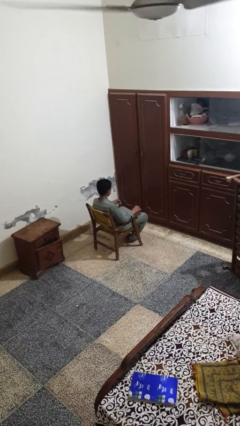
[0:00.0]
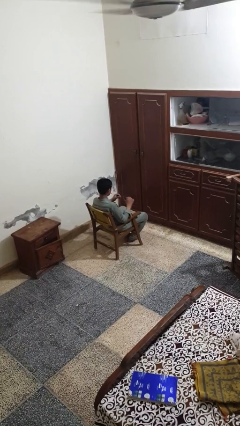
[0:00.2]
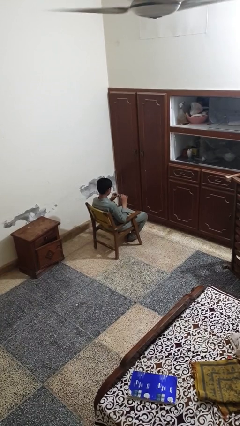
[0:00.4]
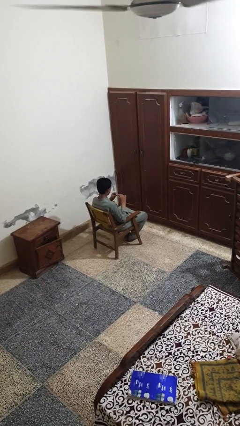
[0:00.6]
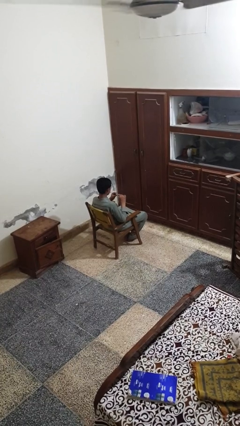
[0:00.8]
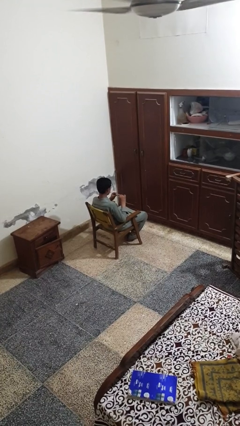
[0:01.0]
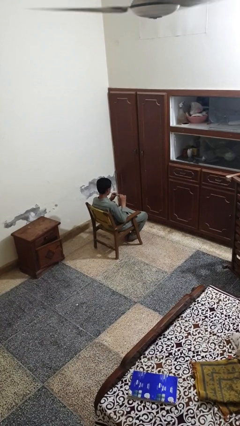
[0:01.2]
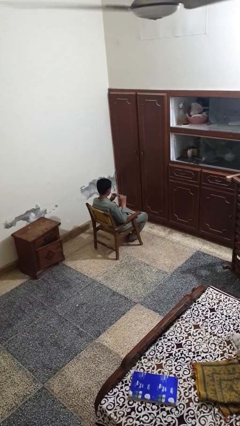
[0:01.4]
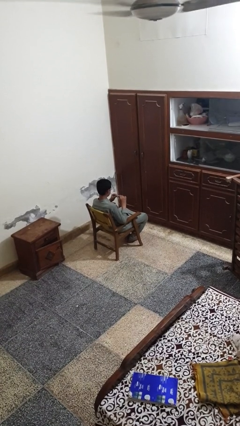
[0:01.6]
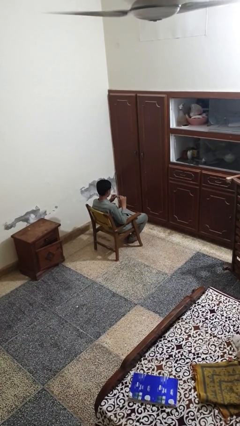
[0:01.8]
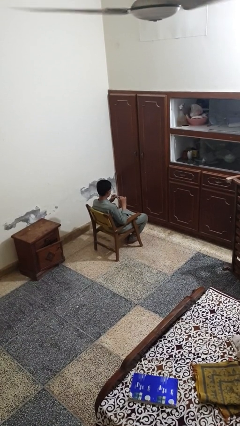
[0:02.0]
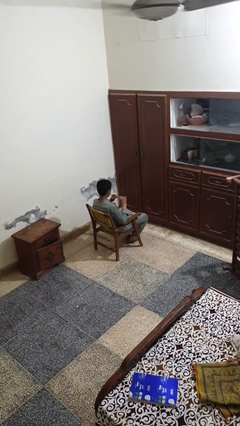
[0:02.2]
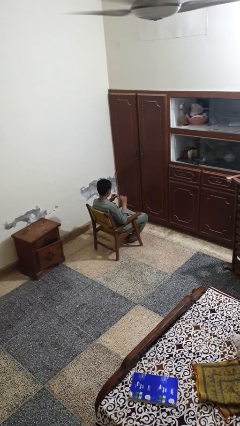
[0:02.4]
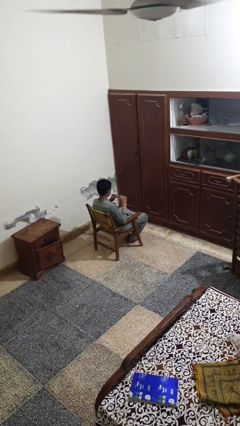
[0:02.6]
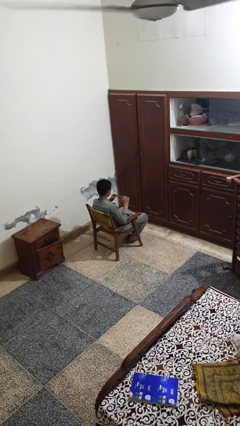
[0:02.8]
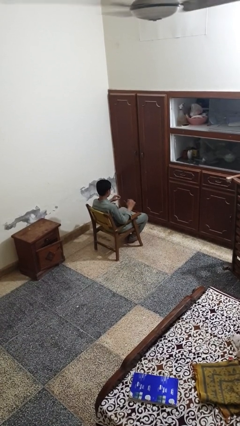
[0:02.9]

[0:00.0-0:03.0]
person clips fingernails

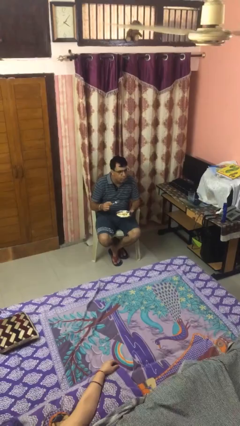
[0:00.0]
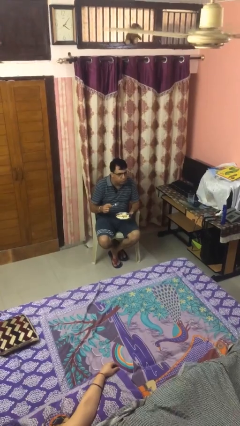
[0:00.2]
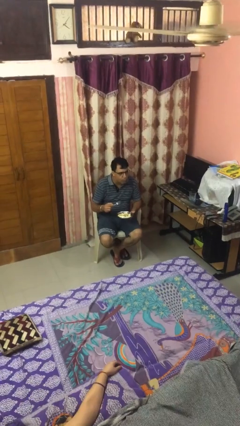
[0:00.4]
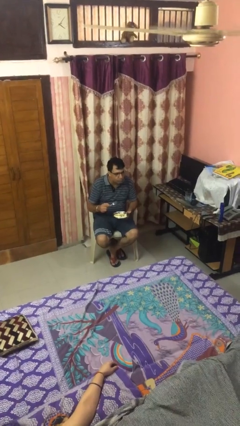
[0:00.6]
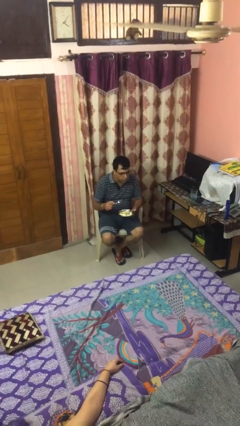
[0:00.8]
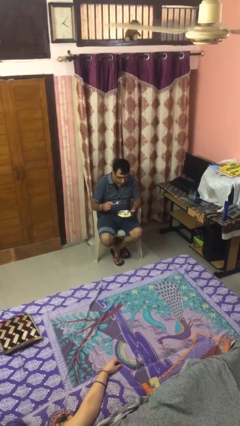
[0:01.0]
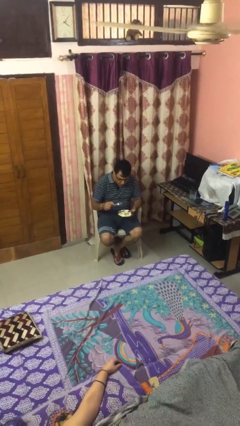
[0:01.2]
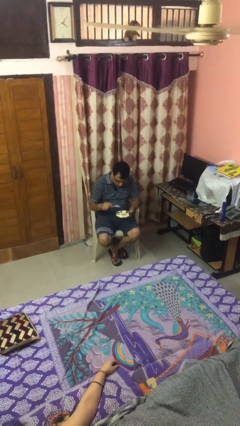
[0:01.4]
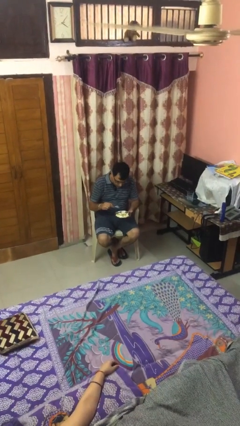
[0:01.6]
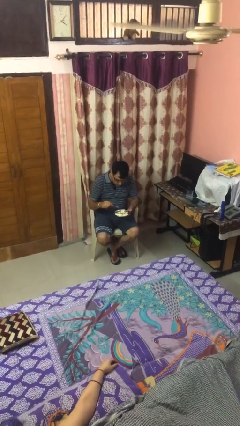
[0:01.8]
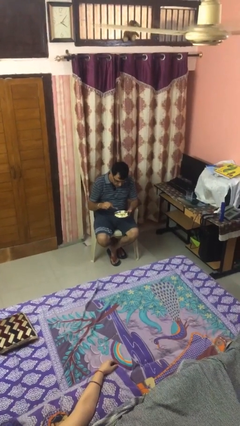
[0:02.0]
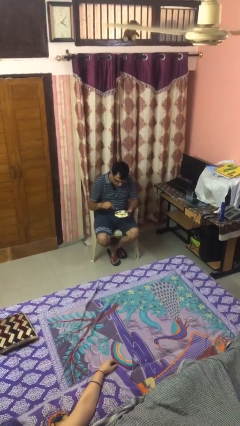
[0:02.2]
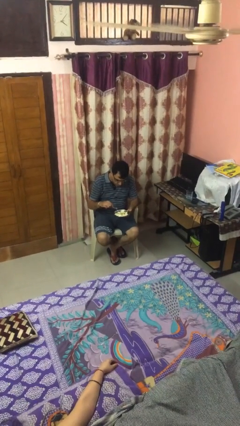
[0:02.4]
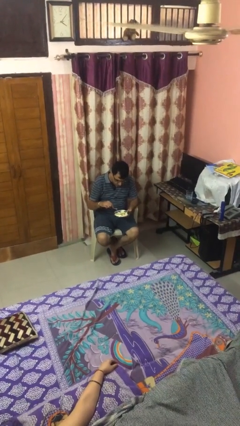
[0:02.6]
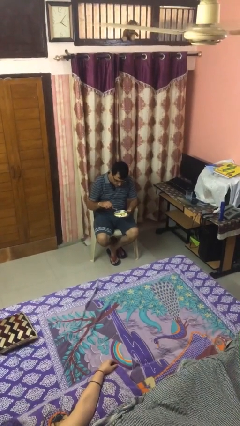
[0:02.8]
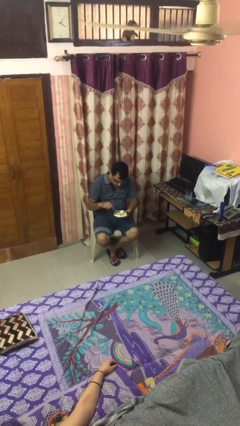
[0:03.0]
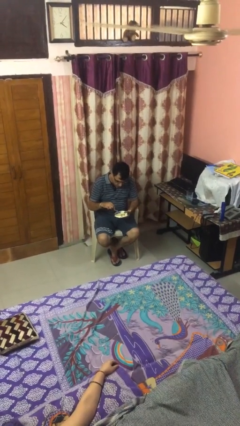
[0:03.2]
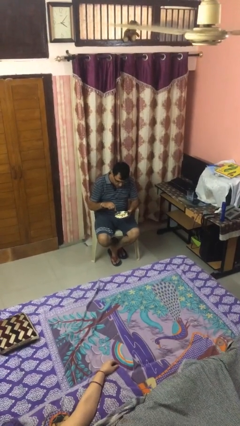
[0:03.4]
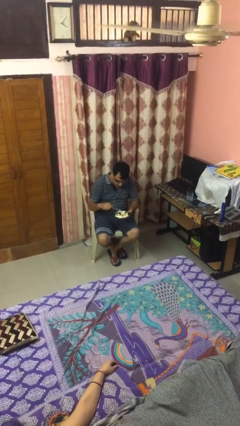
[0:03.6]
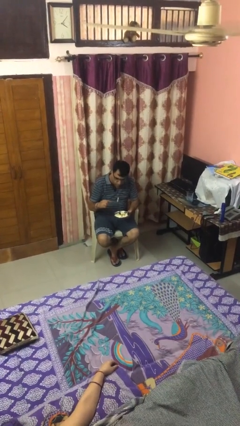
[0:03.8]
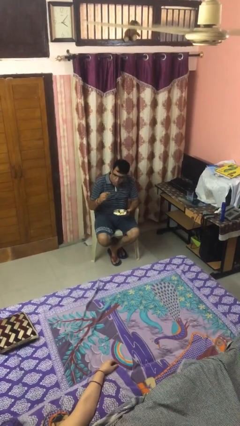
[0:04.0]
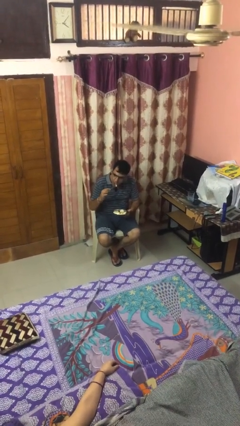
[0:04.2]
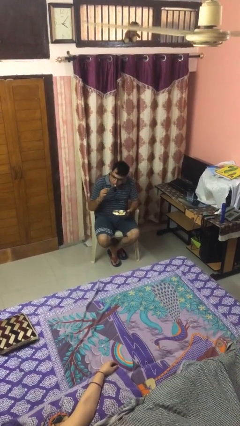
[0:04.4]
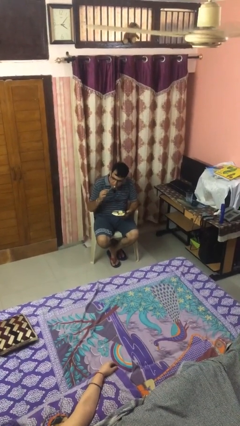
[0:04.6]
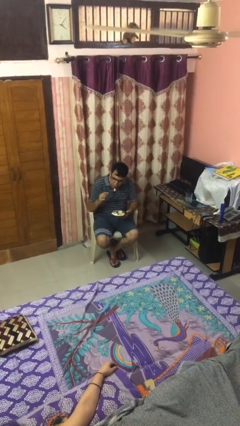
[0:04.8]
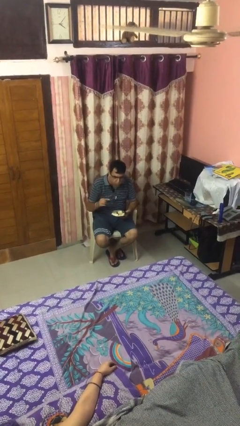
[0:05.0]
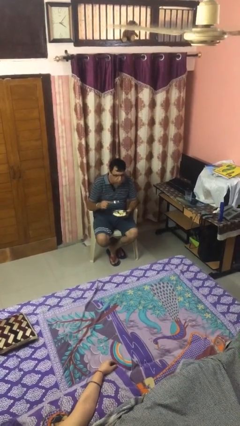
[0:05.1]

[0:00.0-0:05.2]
person eats with utensil

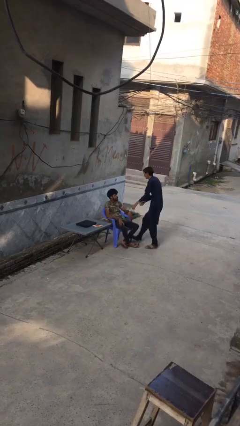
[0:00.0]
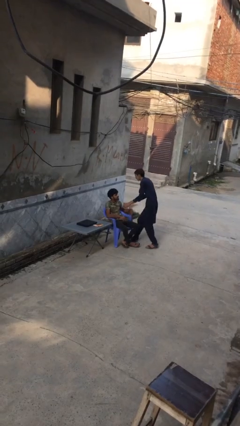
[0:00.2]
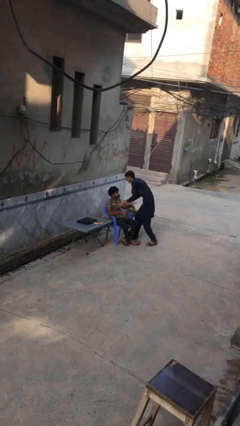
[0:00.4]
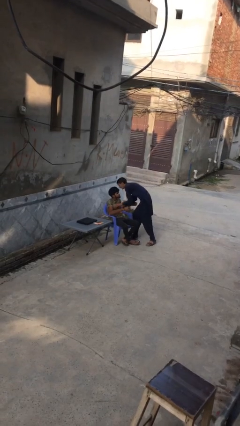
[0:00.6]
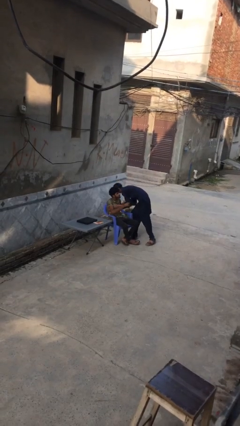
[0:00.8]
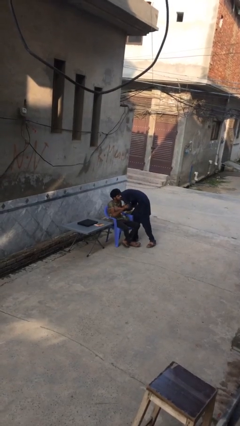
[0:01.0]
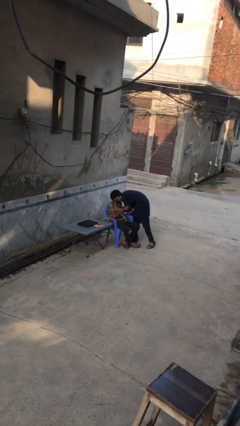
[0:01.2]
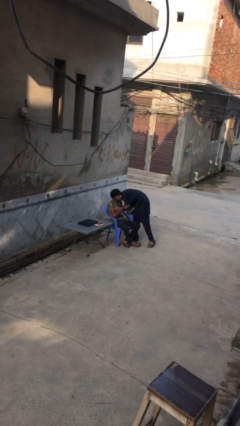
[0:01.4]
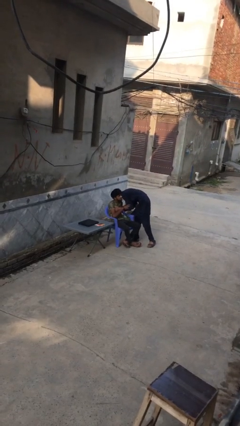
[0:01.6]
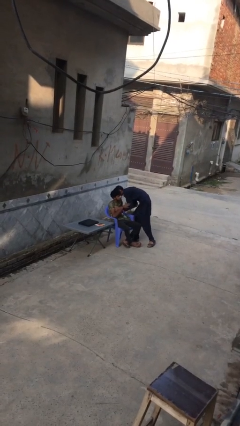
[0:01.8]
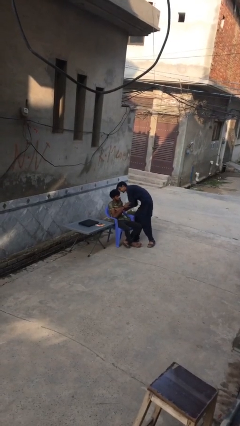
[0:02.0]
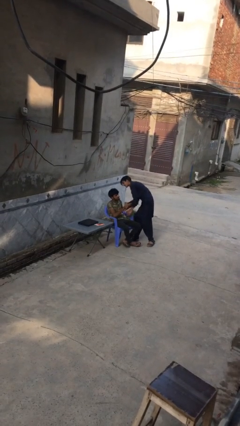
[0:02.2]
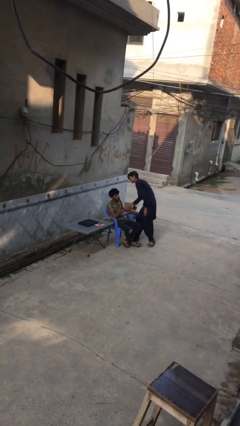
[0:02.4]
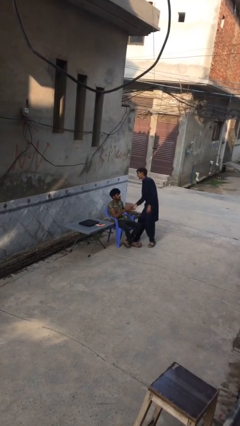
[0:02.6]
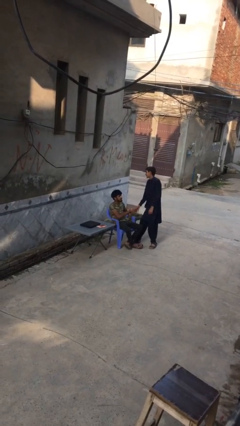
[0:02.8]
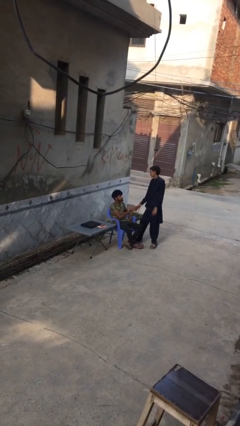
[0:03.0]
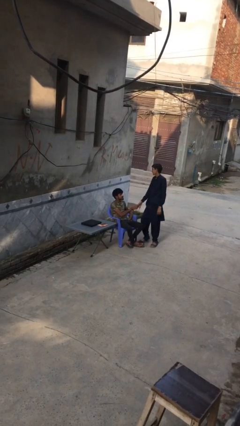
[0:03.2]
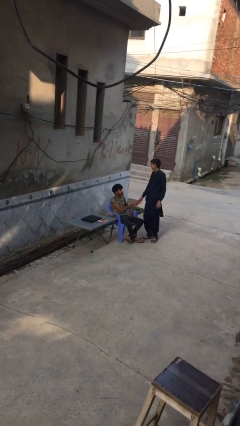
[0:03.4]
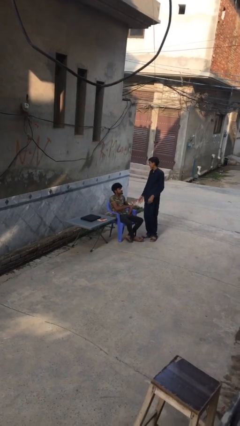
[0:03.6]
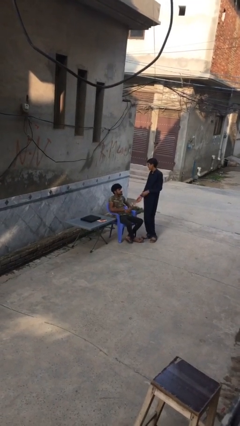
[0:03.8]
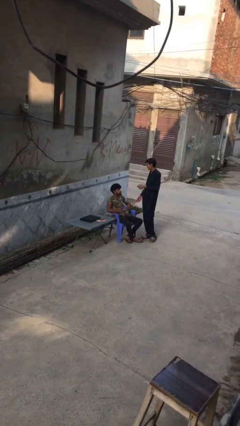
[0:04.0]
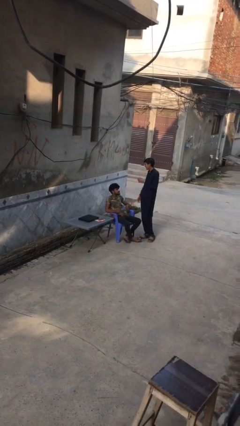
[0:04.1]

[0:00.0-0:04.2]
person embraces person

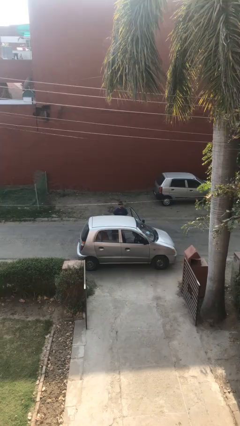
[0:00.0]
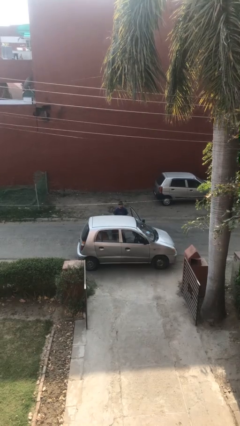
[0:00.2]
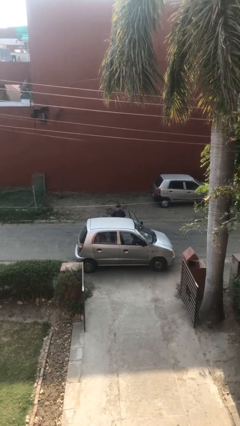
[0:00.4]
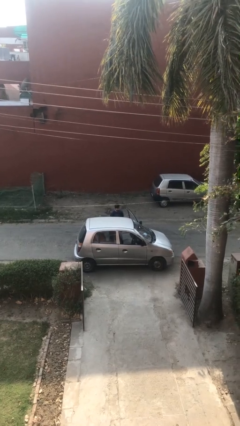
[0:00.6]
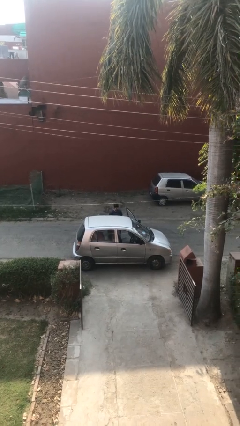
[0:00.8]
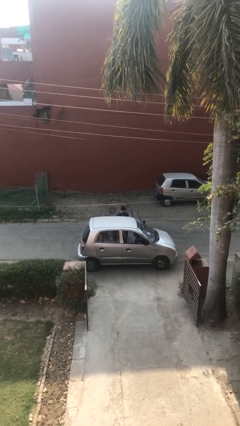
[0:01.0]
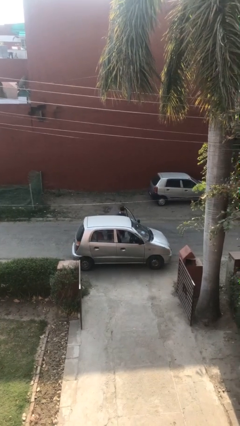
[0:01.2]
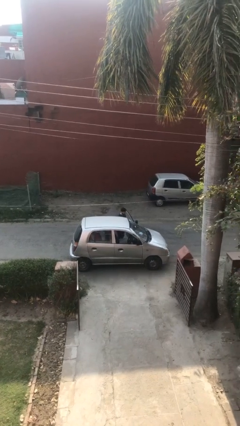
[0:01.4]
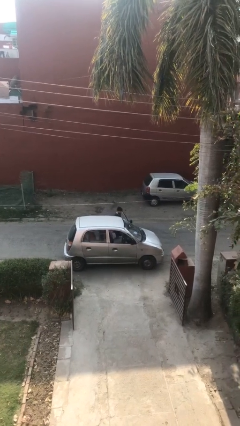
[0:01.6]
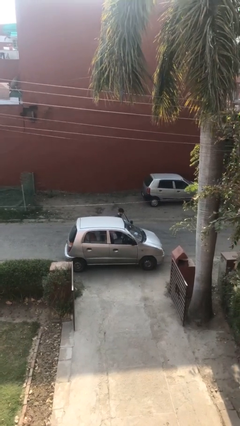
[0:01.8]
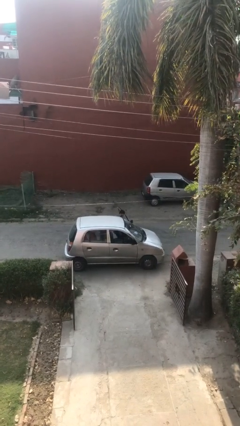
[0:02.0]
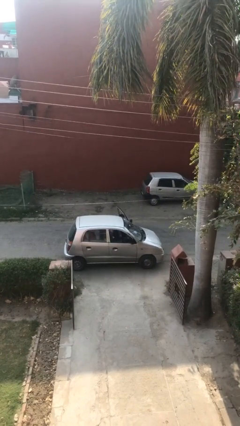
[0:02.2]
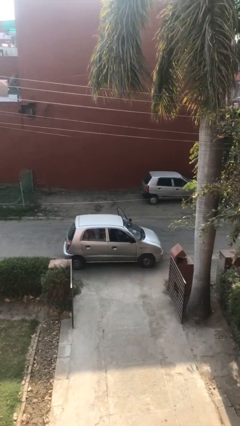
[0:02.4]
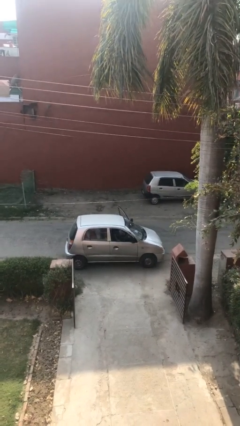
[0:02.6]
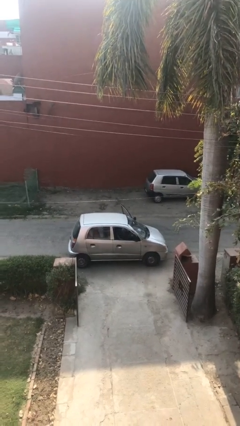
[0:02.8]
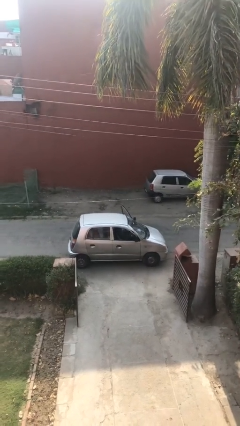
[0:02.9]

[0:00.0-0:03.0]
person enters car

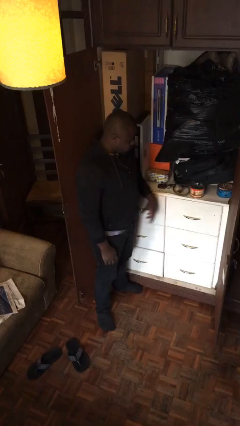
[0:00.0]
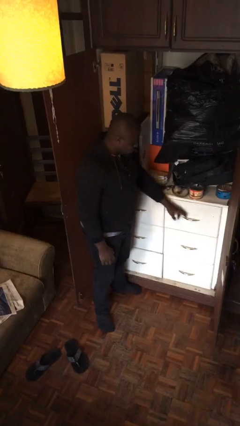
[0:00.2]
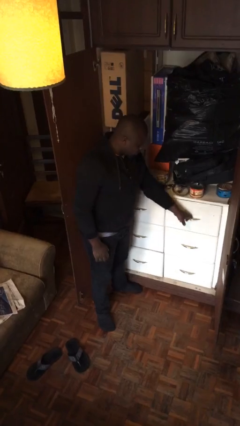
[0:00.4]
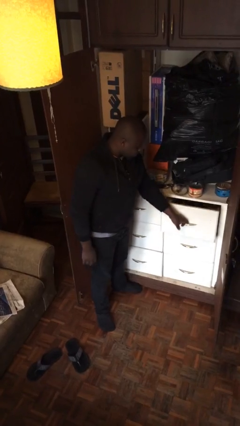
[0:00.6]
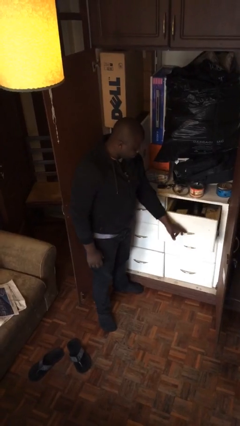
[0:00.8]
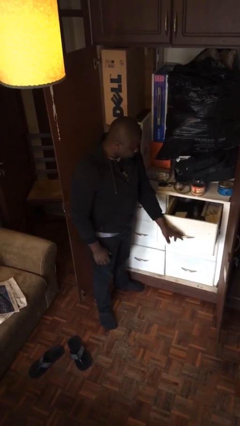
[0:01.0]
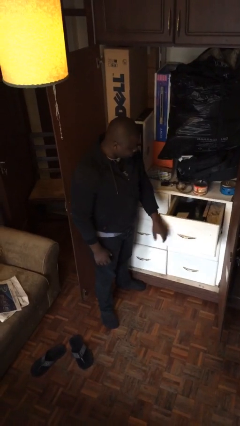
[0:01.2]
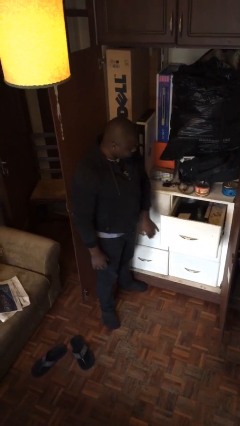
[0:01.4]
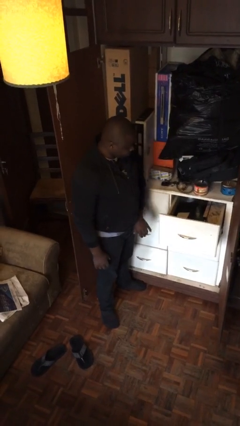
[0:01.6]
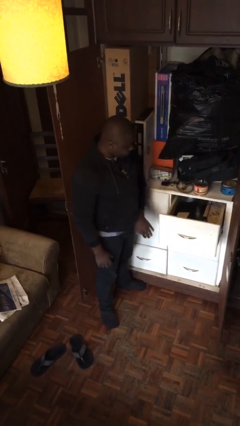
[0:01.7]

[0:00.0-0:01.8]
person opens dresser drawer

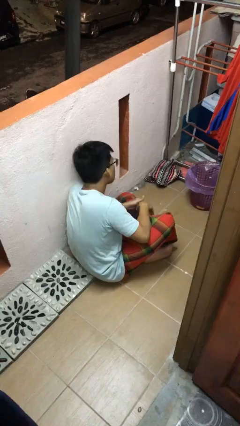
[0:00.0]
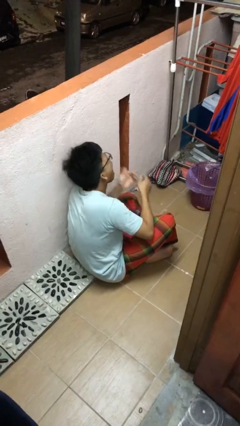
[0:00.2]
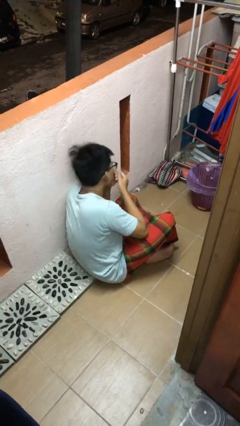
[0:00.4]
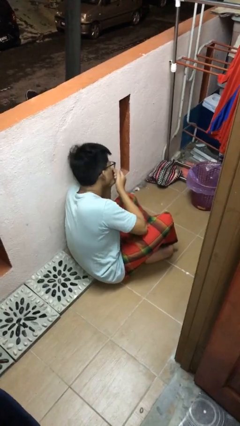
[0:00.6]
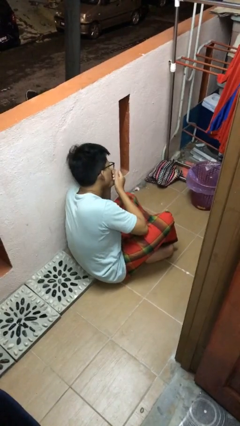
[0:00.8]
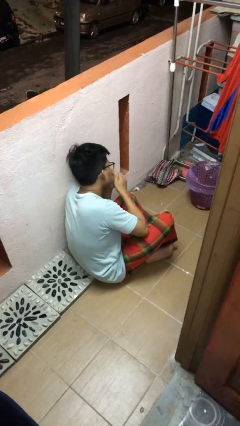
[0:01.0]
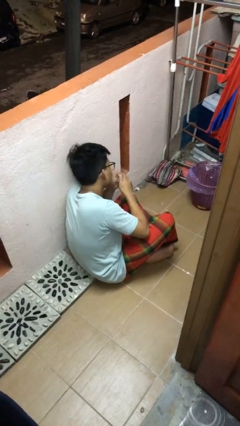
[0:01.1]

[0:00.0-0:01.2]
person sneezes into hand
